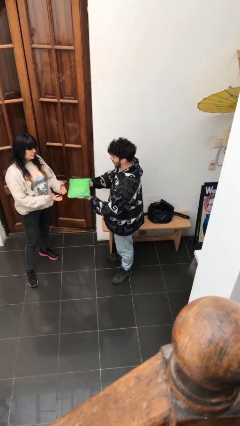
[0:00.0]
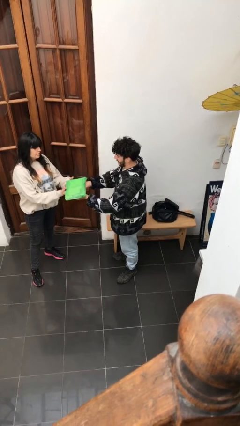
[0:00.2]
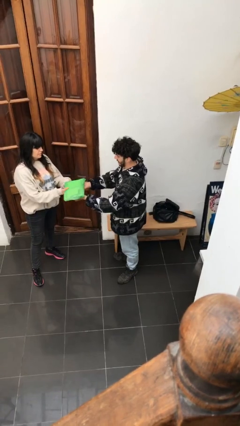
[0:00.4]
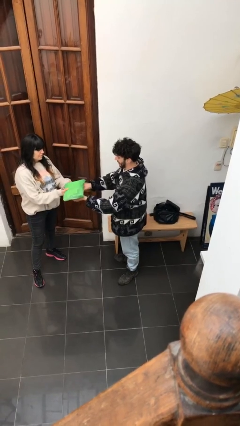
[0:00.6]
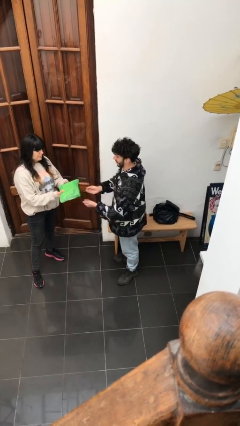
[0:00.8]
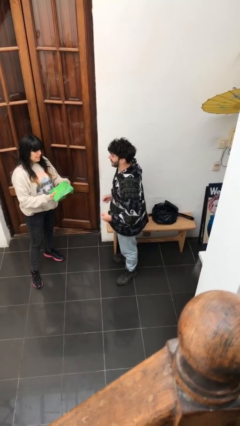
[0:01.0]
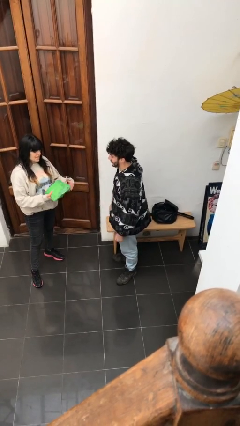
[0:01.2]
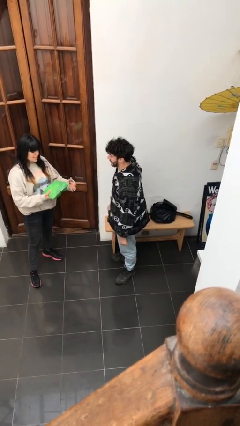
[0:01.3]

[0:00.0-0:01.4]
person transfers object to person

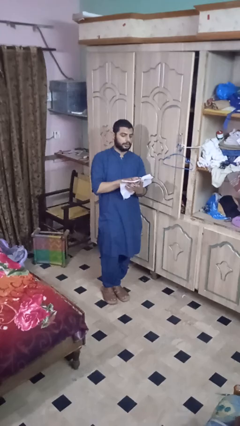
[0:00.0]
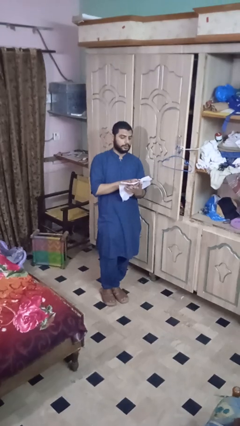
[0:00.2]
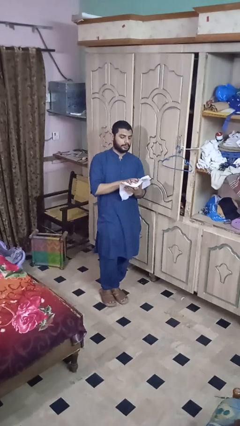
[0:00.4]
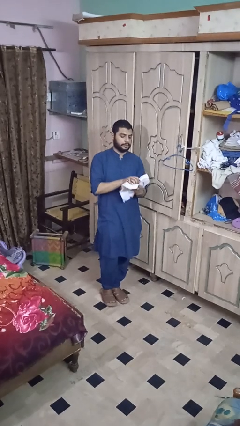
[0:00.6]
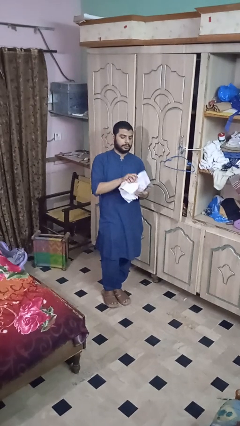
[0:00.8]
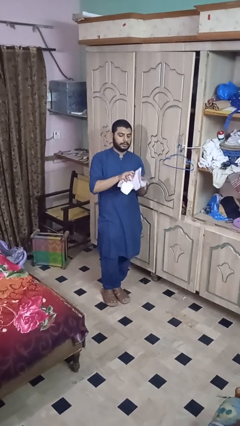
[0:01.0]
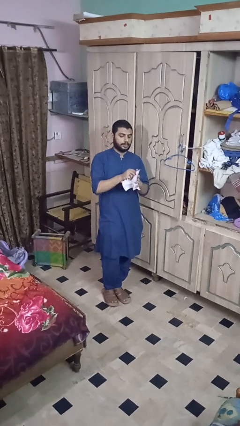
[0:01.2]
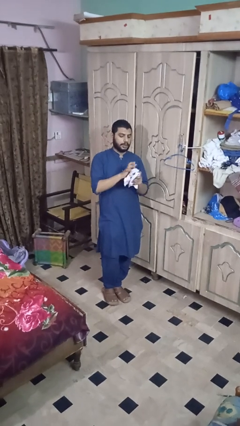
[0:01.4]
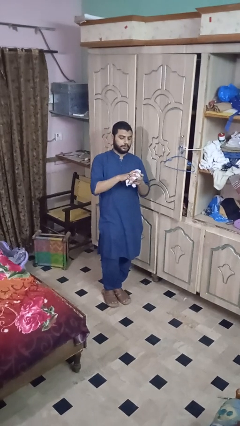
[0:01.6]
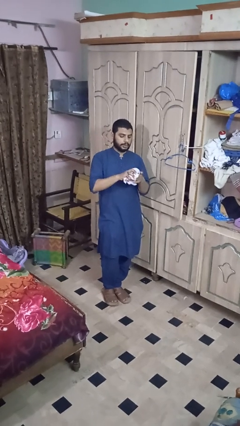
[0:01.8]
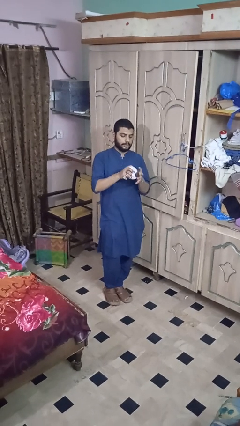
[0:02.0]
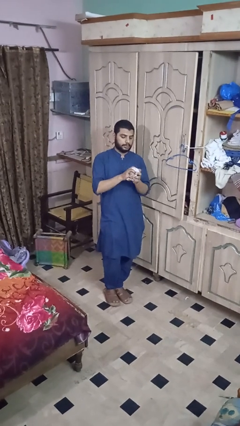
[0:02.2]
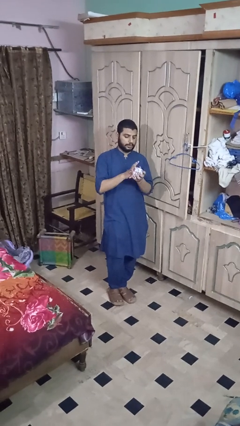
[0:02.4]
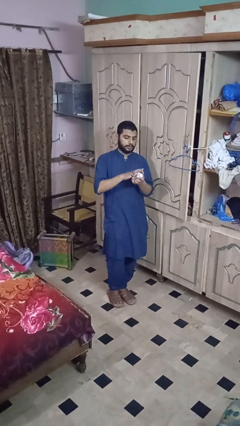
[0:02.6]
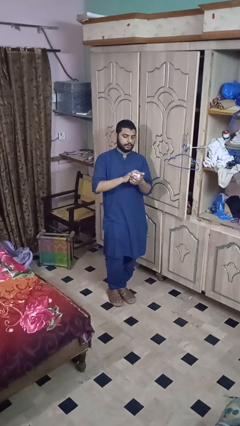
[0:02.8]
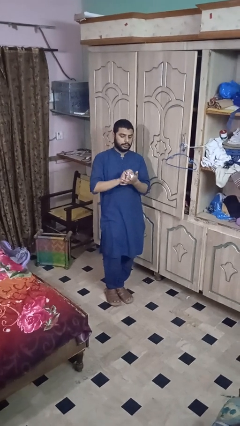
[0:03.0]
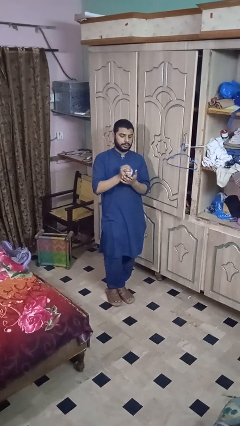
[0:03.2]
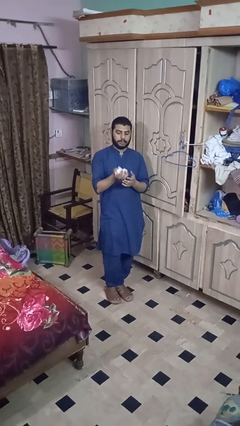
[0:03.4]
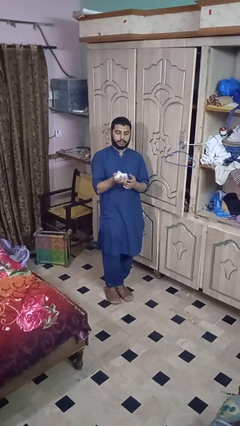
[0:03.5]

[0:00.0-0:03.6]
person crumples paper

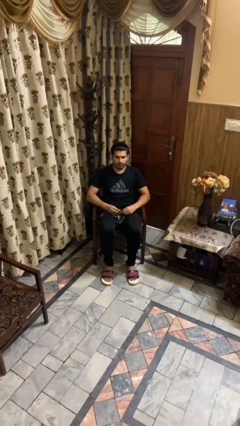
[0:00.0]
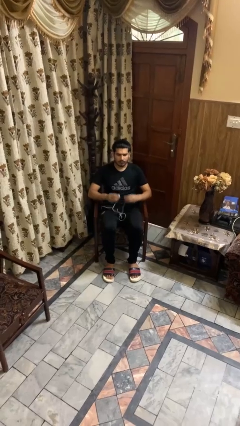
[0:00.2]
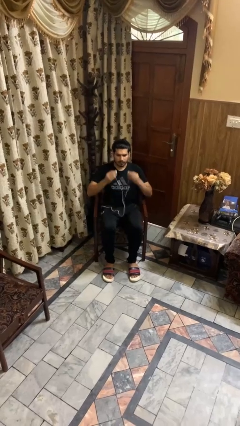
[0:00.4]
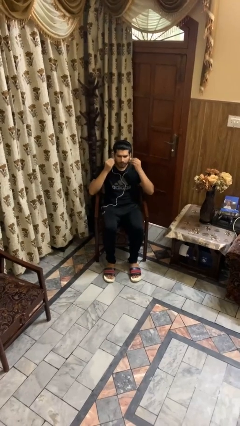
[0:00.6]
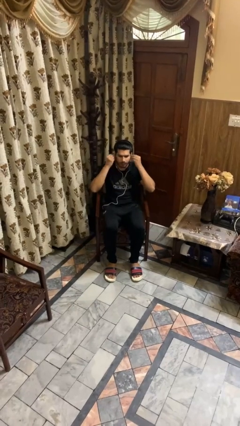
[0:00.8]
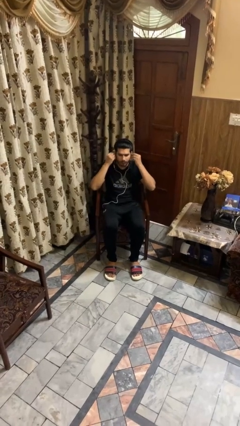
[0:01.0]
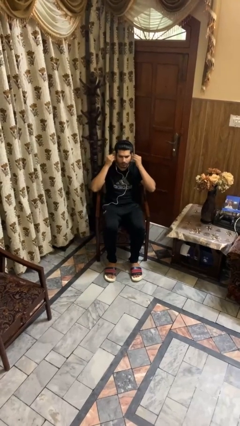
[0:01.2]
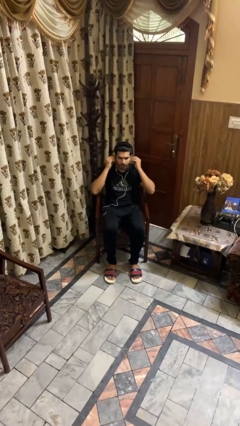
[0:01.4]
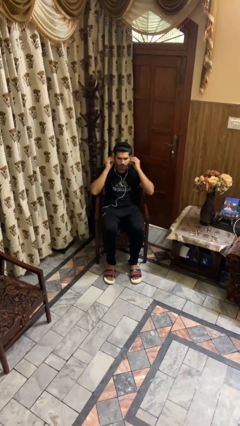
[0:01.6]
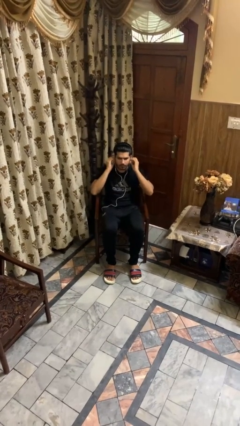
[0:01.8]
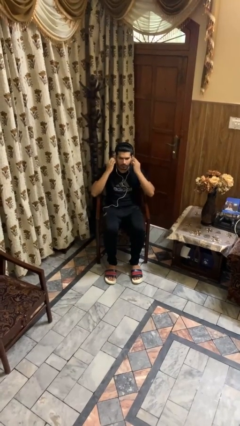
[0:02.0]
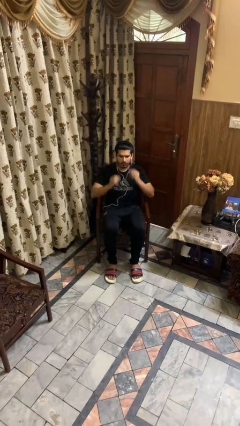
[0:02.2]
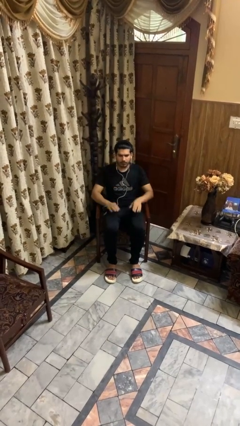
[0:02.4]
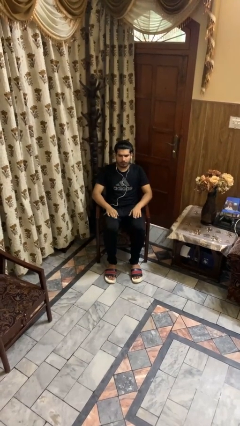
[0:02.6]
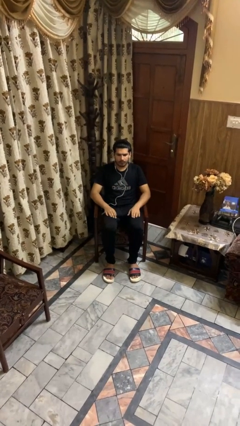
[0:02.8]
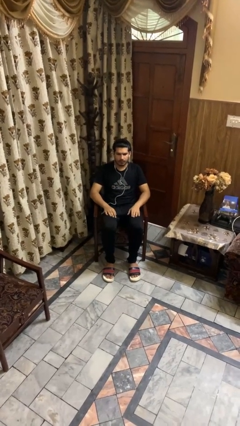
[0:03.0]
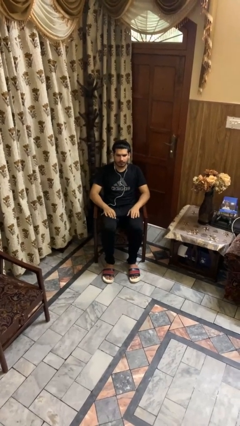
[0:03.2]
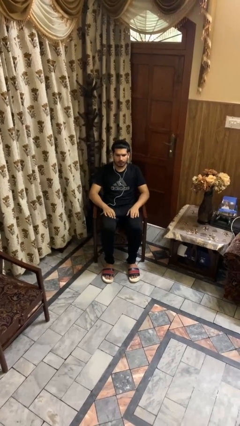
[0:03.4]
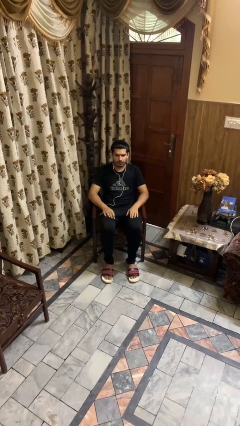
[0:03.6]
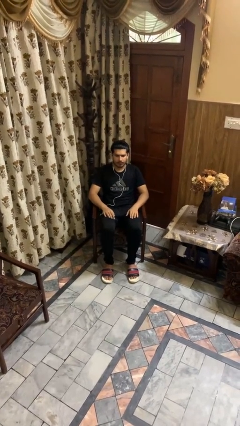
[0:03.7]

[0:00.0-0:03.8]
person puts on headphones

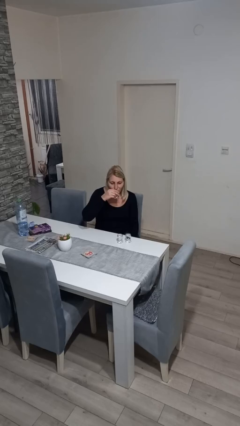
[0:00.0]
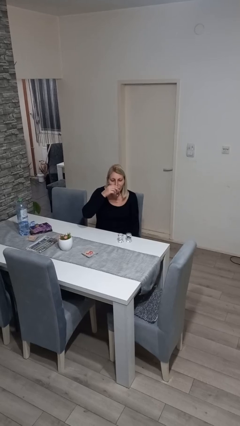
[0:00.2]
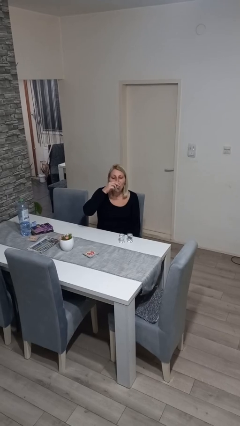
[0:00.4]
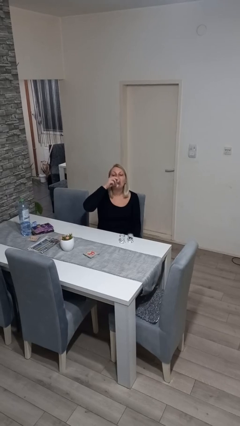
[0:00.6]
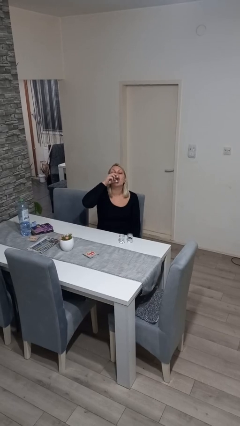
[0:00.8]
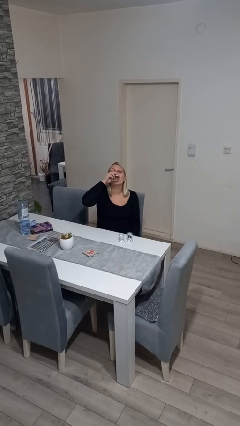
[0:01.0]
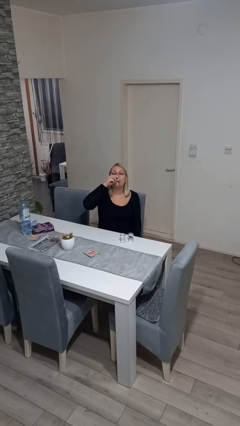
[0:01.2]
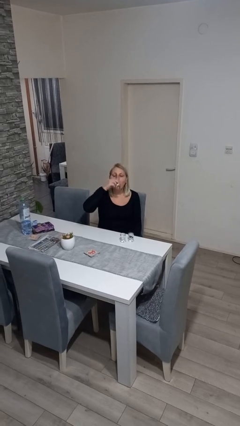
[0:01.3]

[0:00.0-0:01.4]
person drinks from shotglass

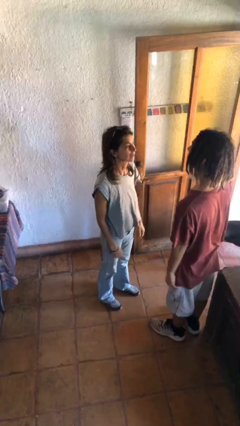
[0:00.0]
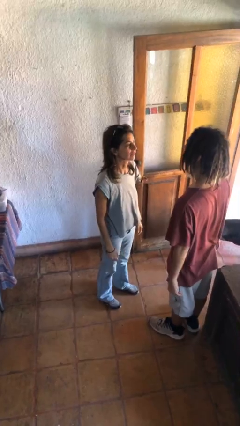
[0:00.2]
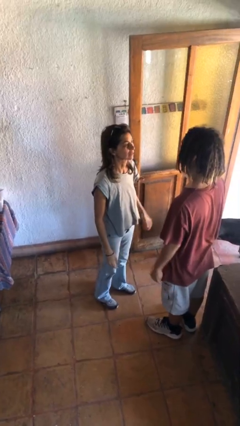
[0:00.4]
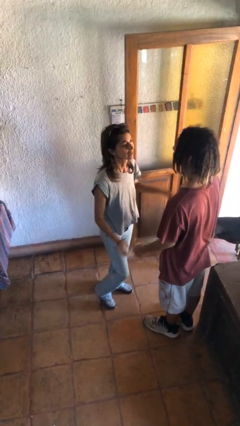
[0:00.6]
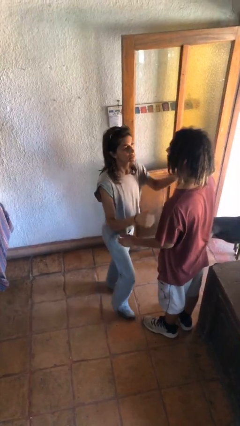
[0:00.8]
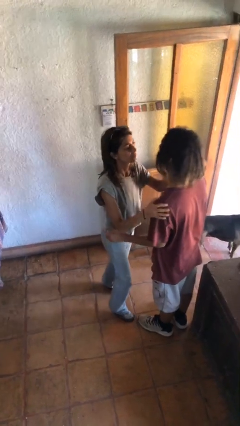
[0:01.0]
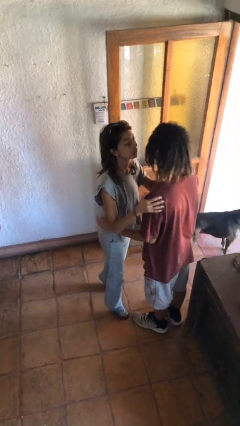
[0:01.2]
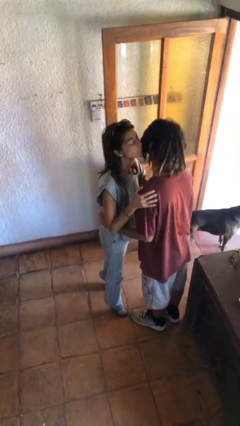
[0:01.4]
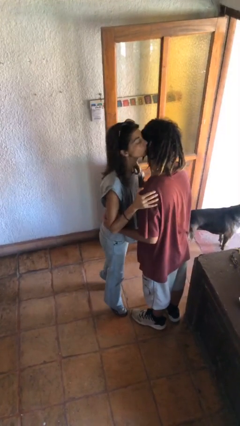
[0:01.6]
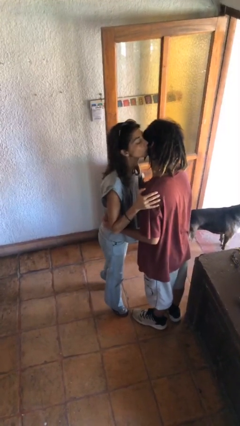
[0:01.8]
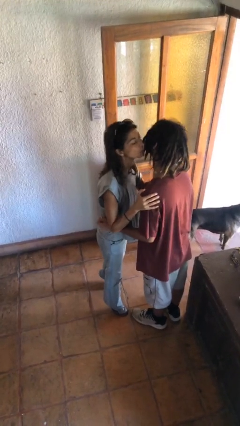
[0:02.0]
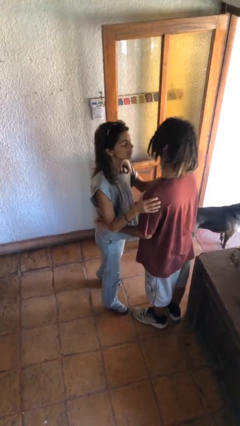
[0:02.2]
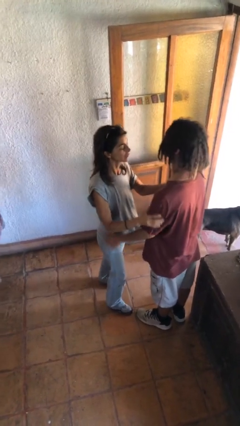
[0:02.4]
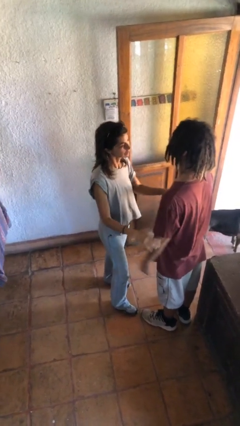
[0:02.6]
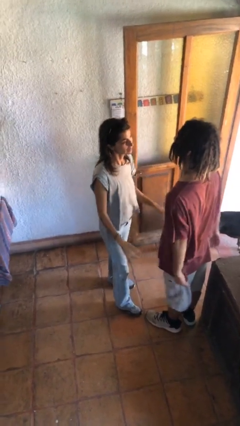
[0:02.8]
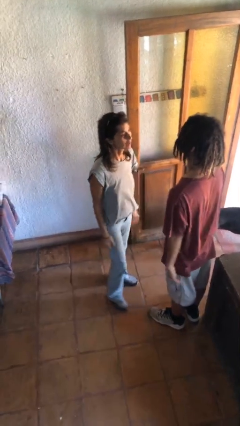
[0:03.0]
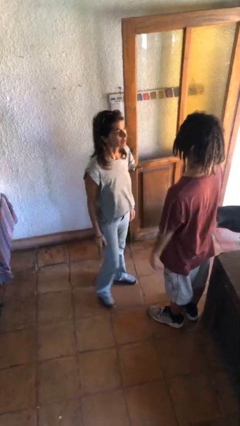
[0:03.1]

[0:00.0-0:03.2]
person kisses cheek of person

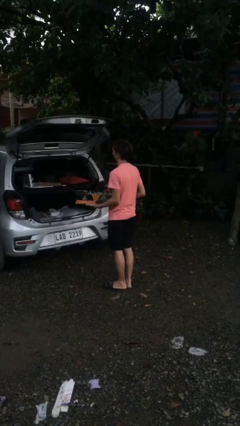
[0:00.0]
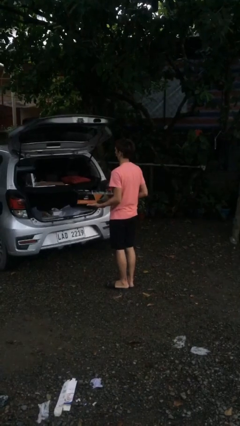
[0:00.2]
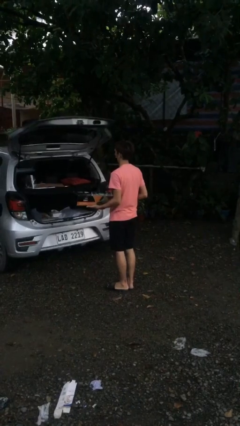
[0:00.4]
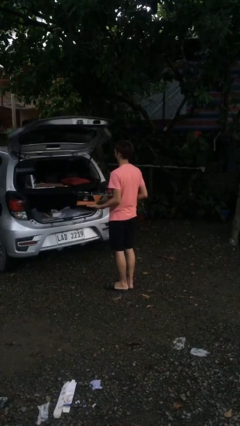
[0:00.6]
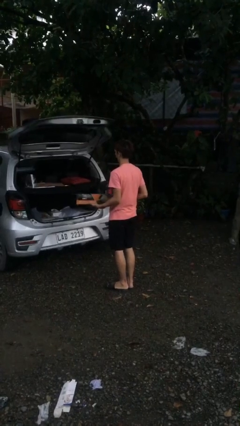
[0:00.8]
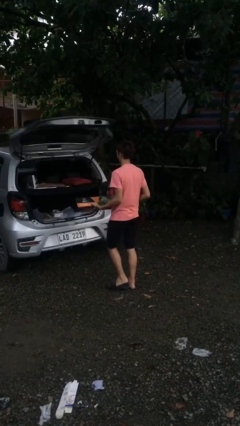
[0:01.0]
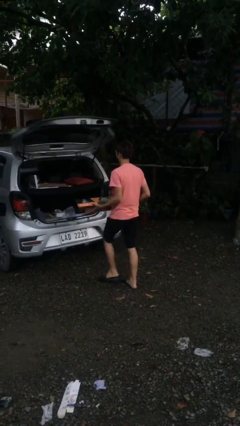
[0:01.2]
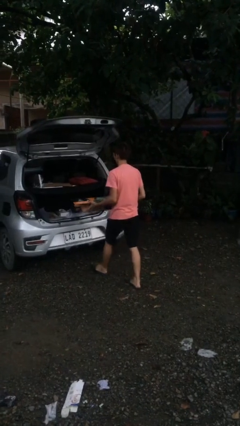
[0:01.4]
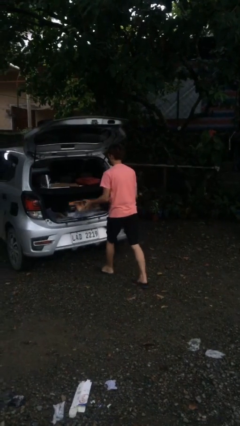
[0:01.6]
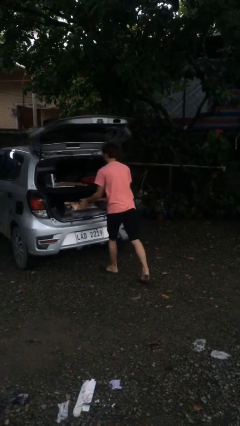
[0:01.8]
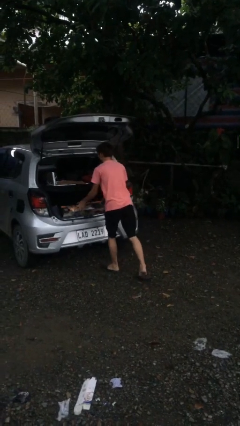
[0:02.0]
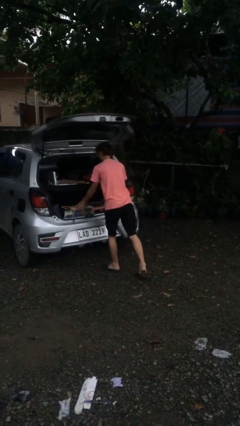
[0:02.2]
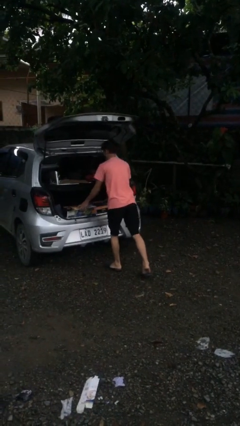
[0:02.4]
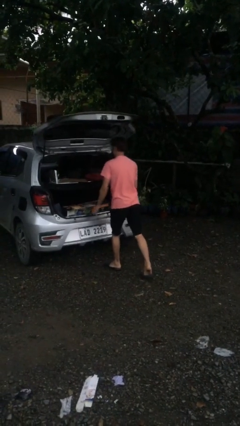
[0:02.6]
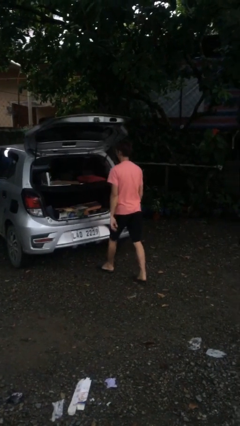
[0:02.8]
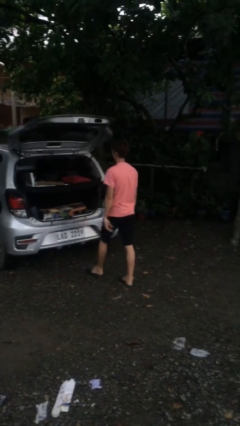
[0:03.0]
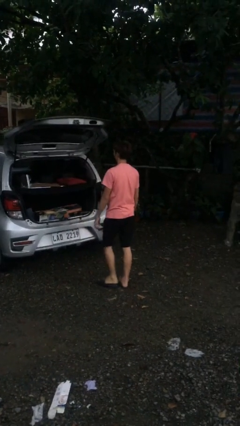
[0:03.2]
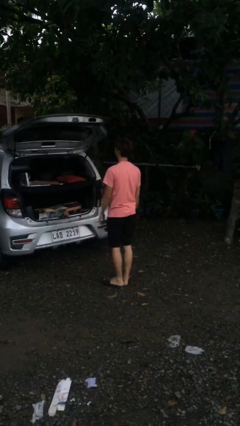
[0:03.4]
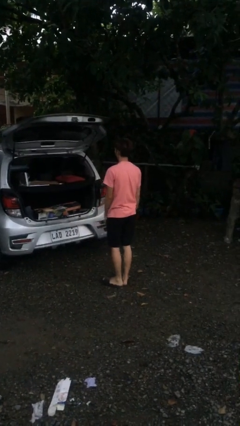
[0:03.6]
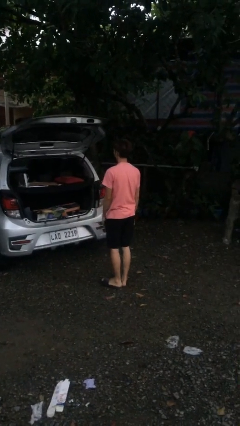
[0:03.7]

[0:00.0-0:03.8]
person loads car
